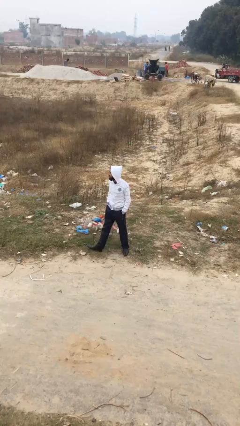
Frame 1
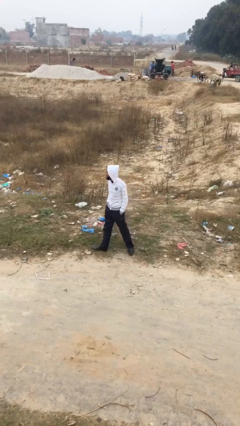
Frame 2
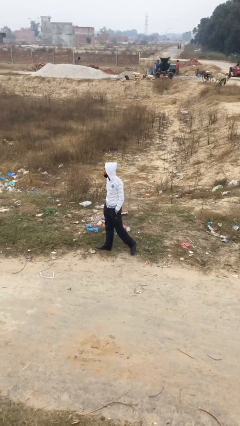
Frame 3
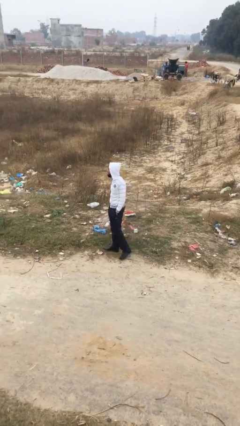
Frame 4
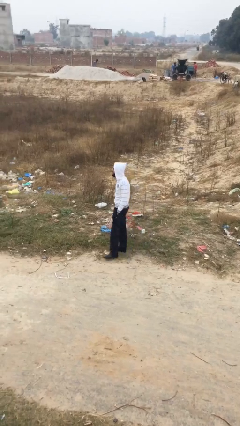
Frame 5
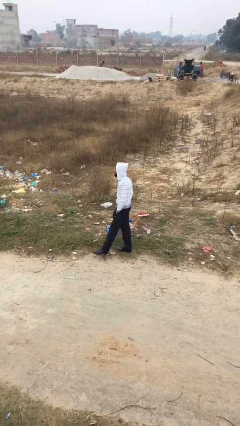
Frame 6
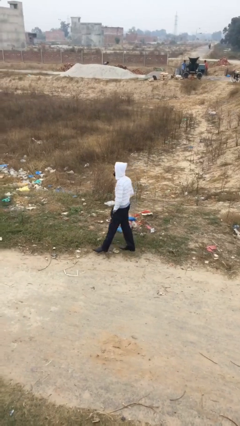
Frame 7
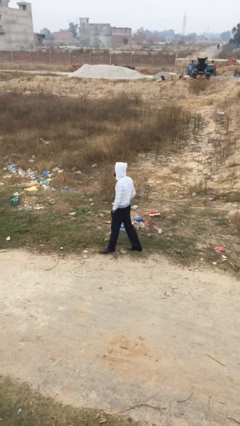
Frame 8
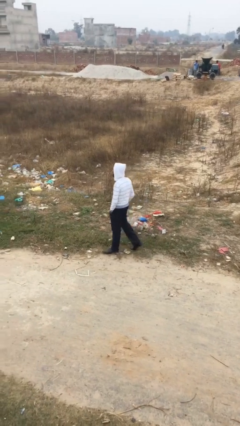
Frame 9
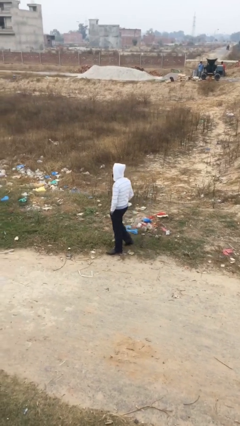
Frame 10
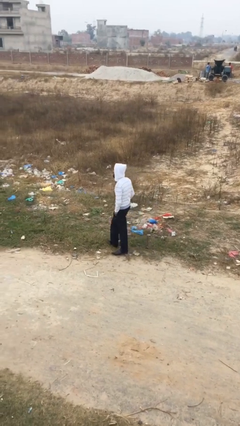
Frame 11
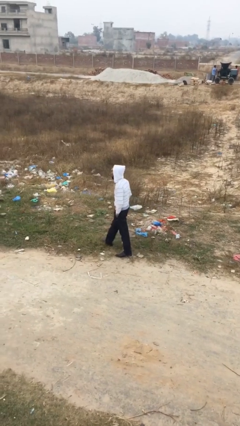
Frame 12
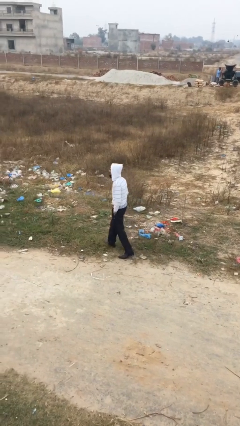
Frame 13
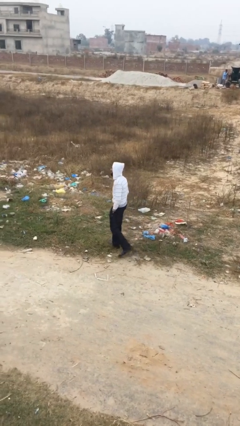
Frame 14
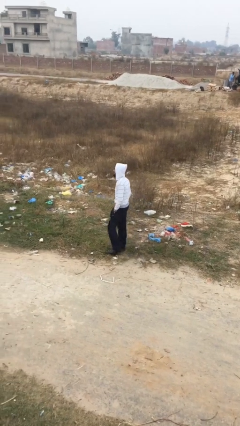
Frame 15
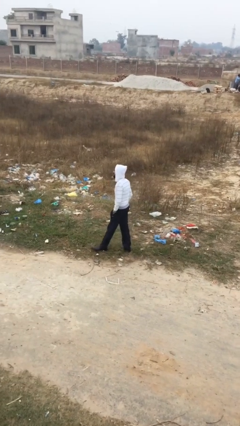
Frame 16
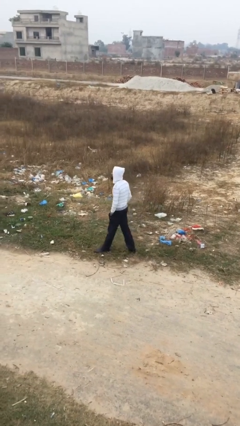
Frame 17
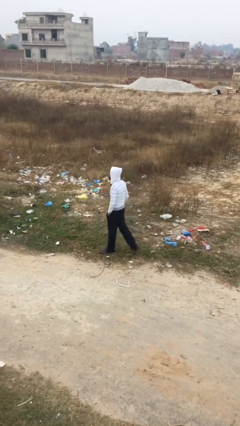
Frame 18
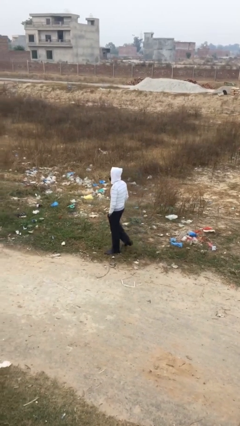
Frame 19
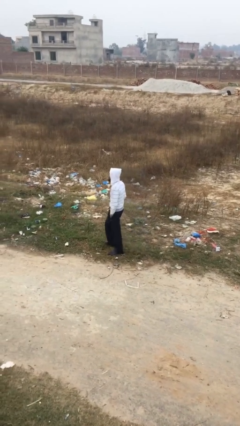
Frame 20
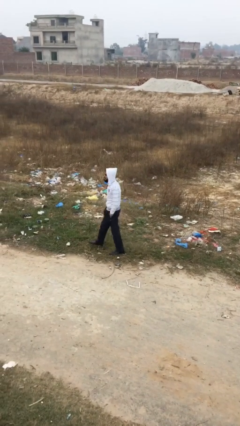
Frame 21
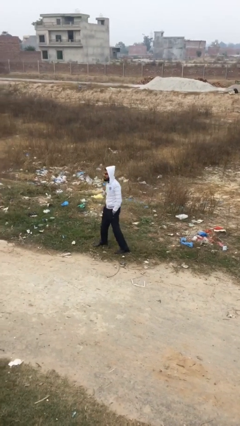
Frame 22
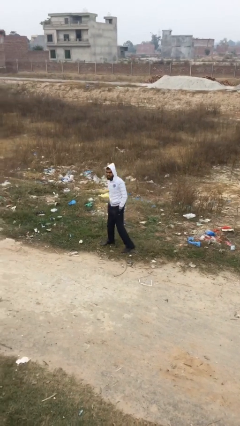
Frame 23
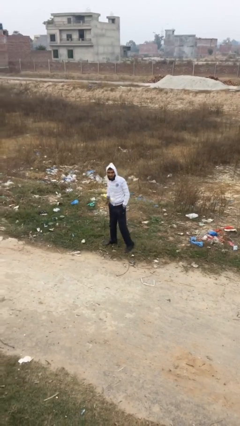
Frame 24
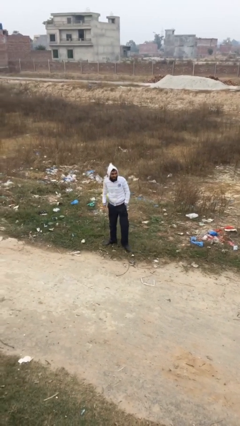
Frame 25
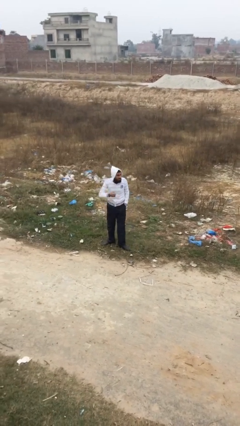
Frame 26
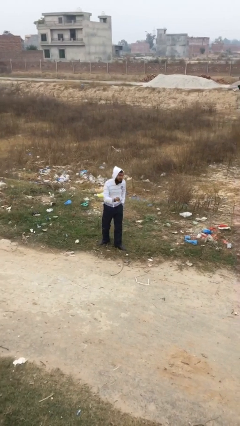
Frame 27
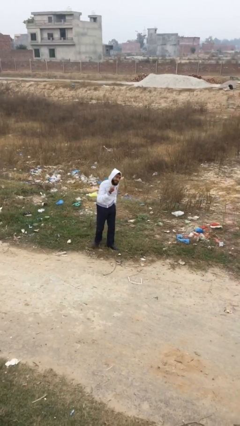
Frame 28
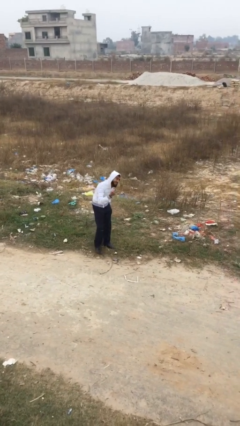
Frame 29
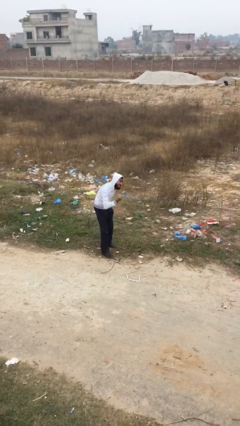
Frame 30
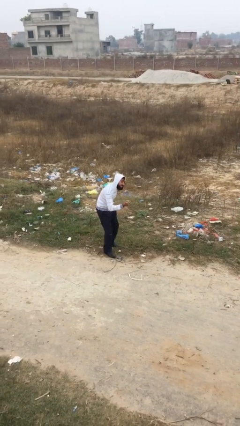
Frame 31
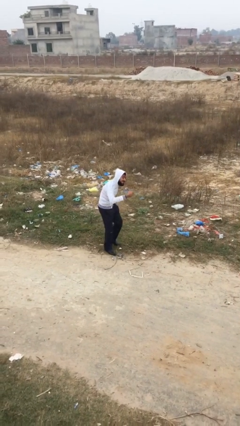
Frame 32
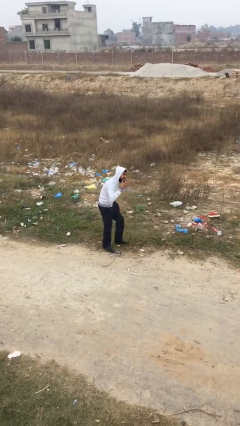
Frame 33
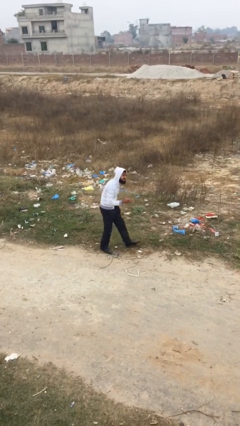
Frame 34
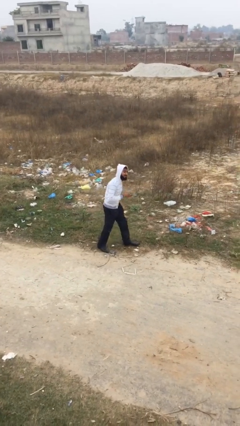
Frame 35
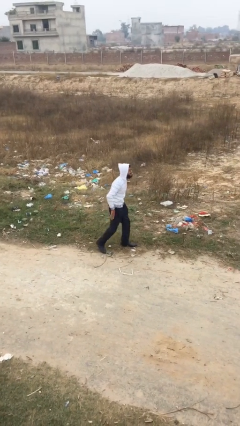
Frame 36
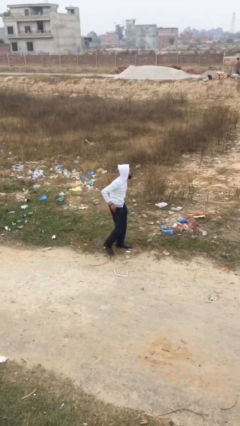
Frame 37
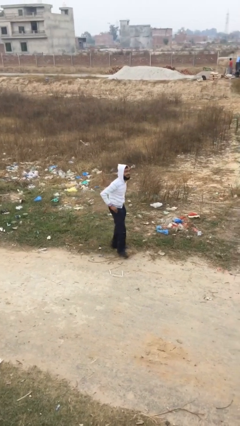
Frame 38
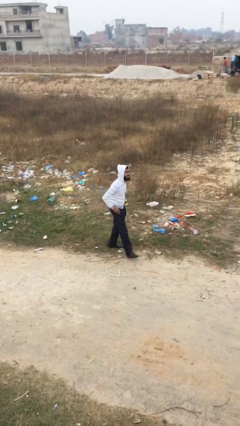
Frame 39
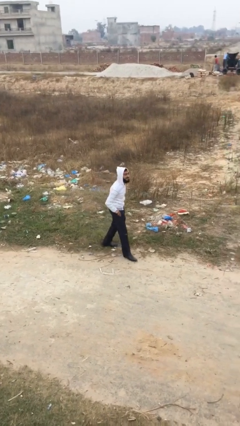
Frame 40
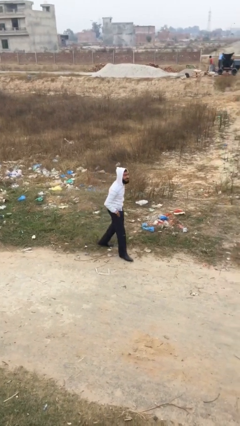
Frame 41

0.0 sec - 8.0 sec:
person walks

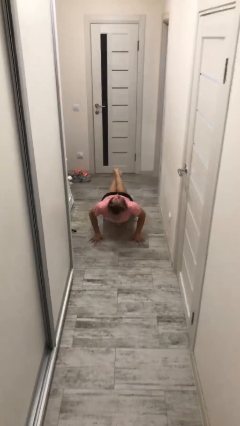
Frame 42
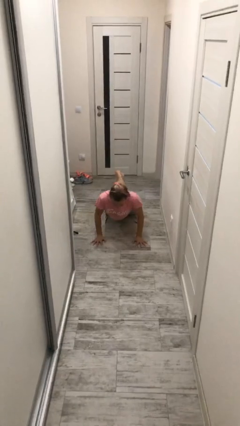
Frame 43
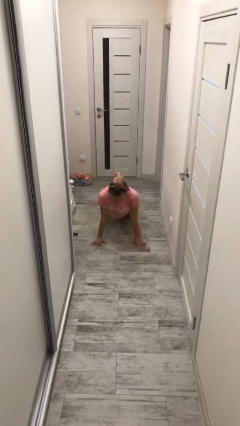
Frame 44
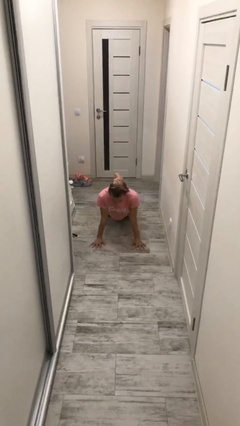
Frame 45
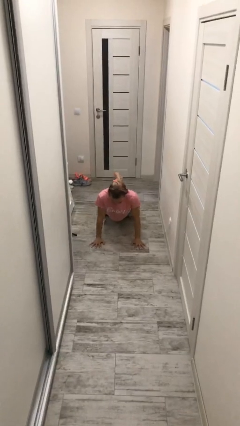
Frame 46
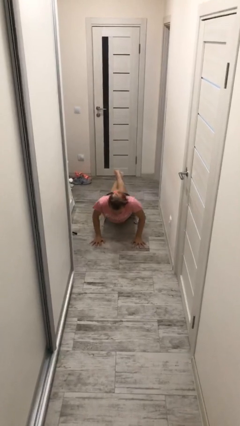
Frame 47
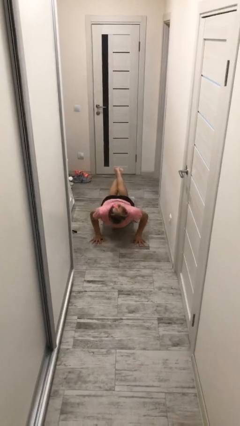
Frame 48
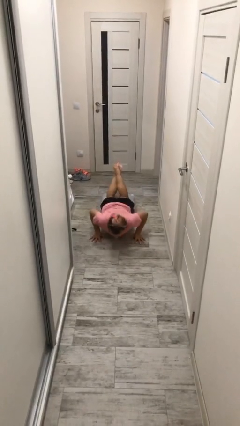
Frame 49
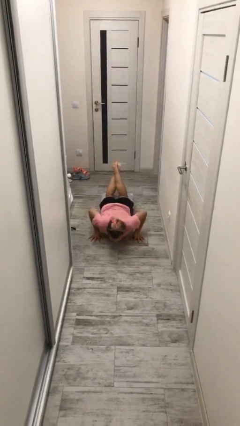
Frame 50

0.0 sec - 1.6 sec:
person exercises with pushup

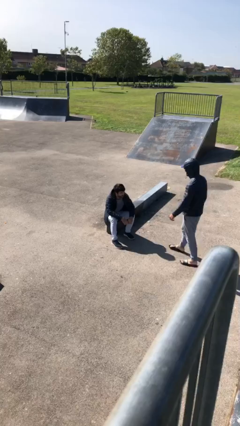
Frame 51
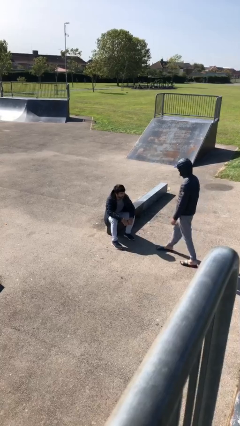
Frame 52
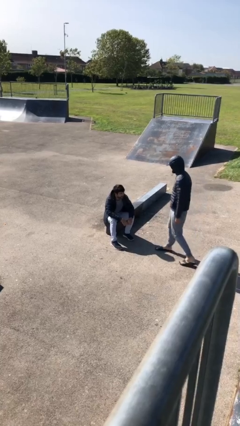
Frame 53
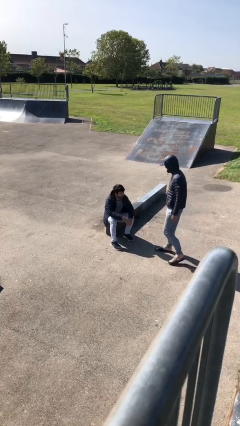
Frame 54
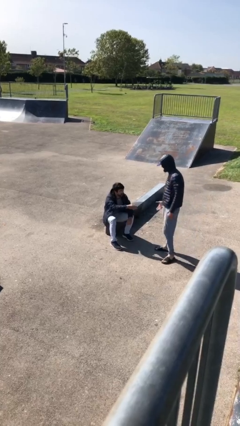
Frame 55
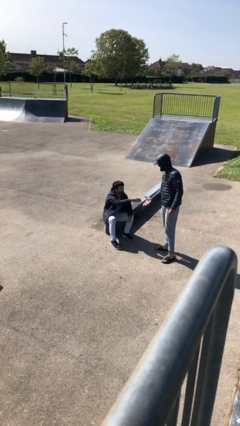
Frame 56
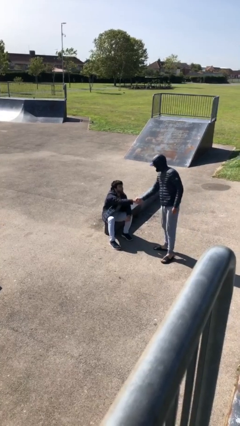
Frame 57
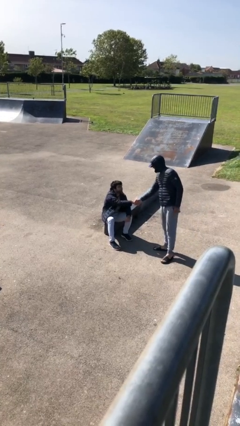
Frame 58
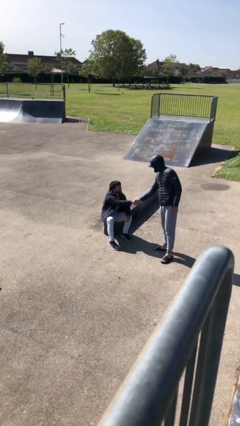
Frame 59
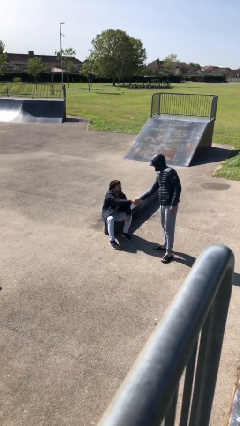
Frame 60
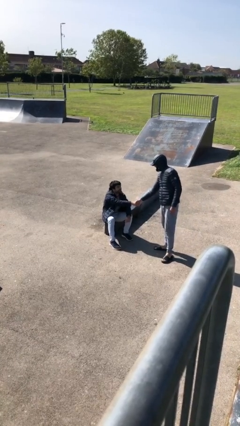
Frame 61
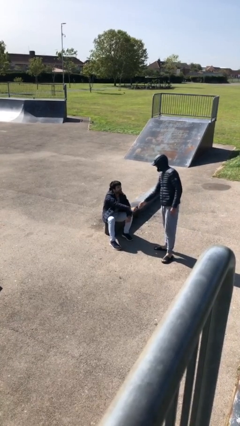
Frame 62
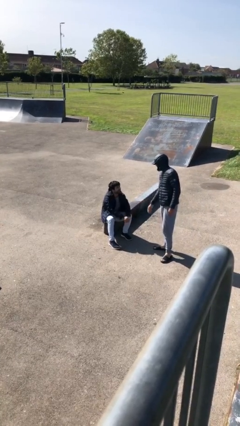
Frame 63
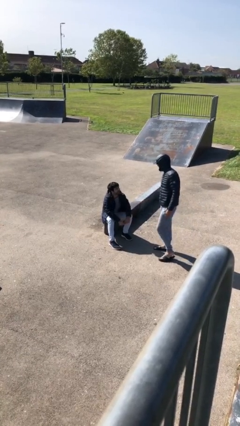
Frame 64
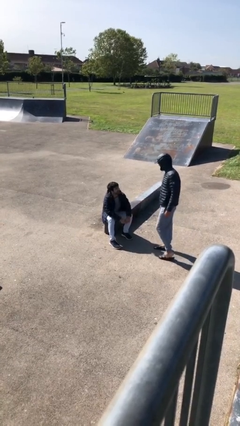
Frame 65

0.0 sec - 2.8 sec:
person shakes hand

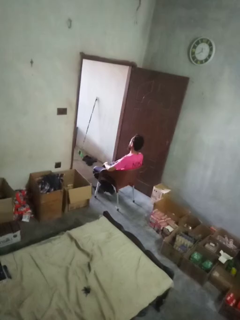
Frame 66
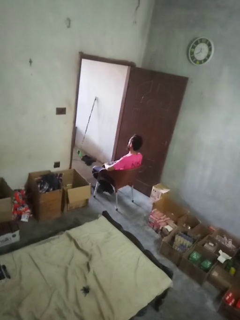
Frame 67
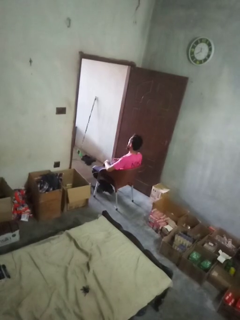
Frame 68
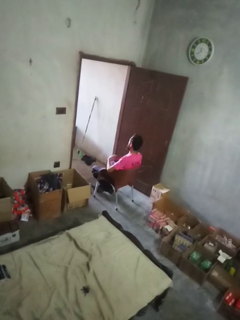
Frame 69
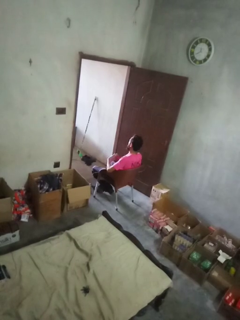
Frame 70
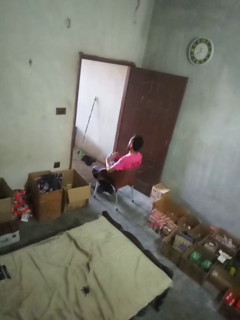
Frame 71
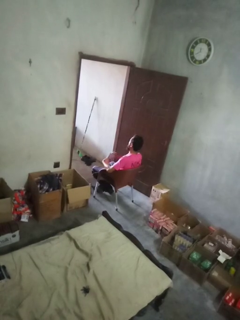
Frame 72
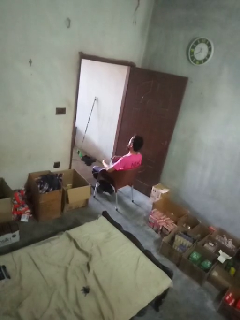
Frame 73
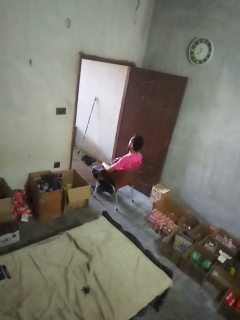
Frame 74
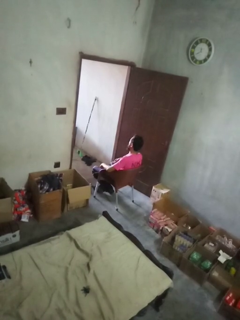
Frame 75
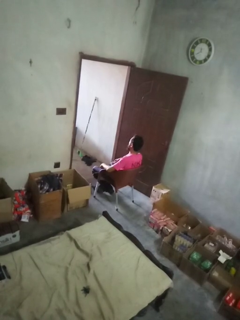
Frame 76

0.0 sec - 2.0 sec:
person takes off gloves

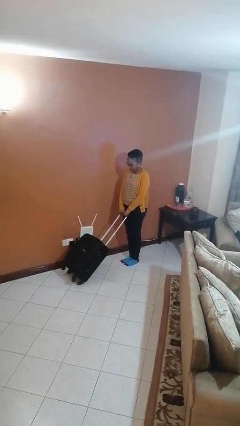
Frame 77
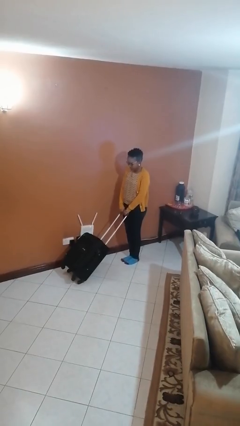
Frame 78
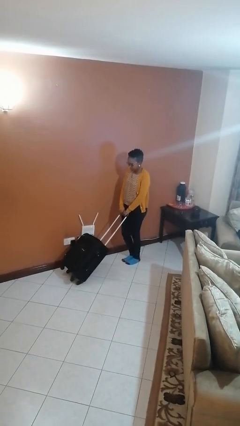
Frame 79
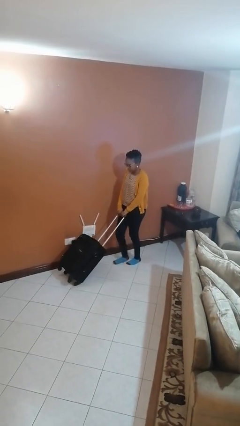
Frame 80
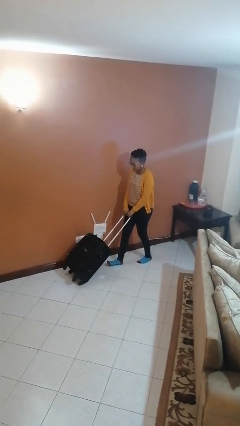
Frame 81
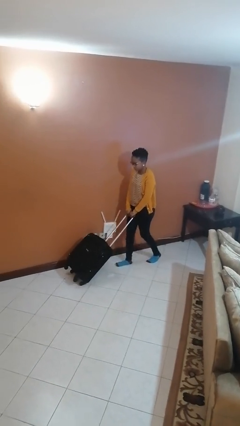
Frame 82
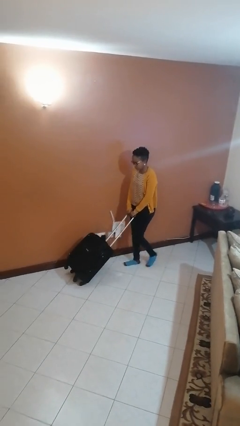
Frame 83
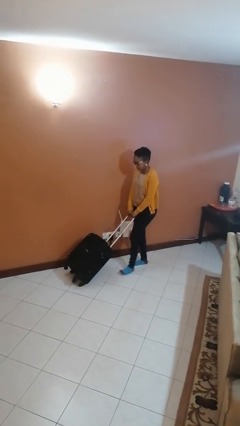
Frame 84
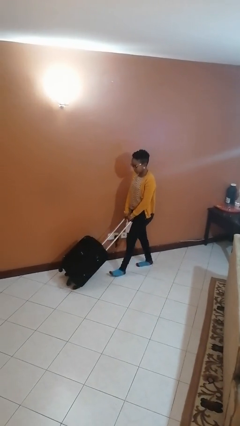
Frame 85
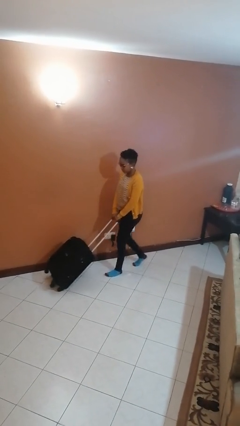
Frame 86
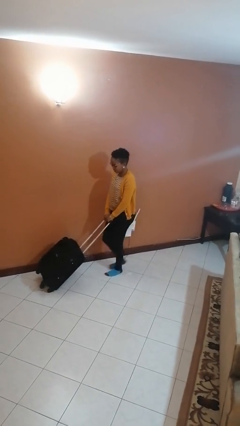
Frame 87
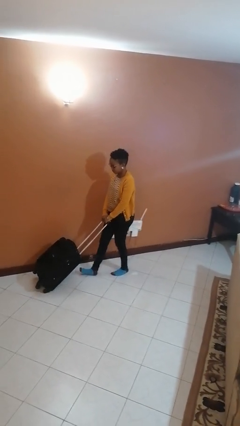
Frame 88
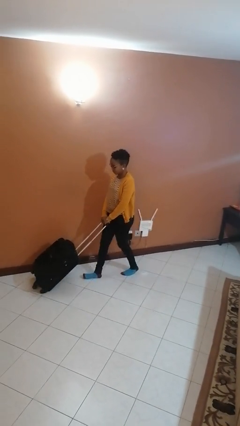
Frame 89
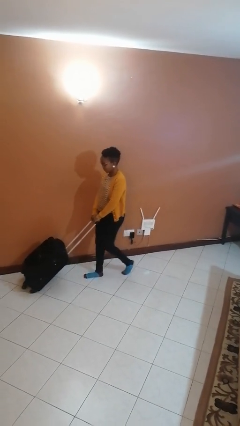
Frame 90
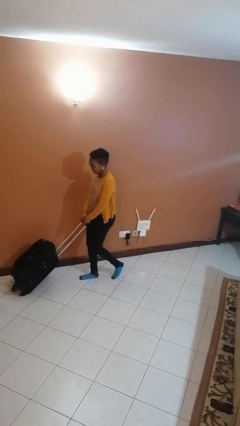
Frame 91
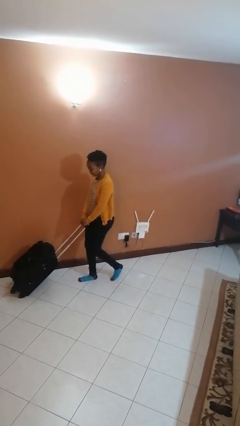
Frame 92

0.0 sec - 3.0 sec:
person pushes wheeled cart

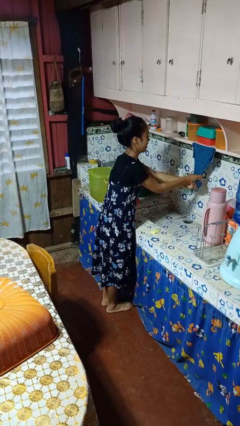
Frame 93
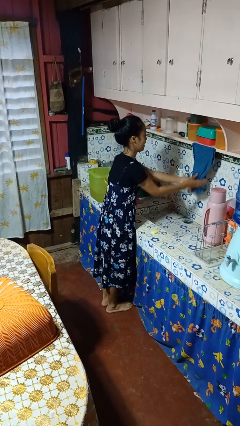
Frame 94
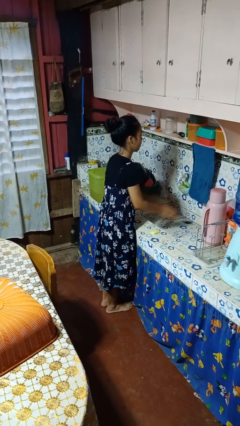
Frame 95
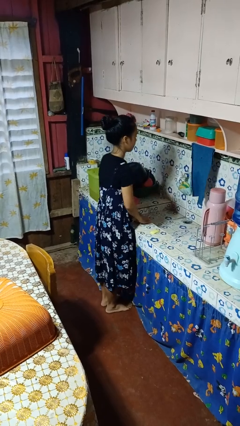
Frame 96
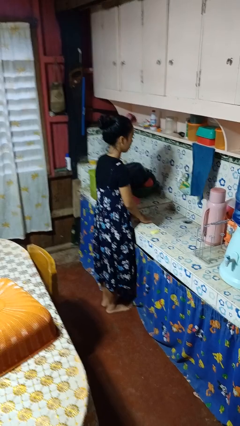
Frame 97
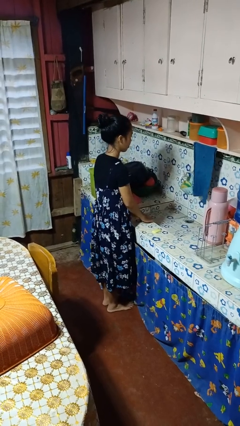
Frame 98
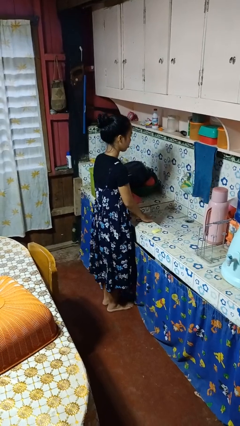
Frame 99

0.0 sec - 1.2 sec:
person dries hands with towel
